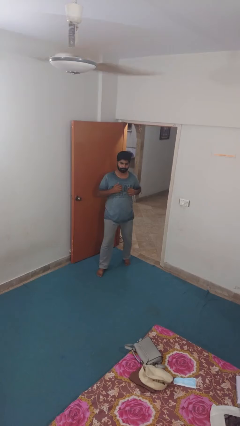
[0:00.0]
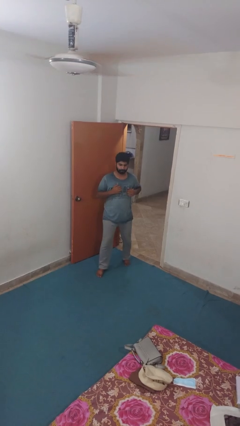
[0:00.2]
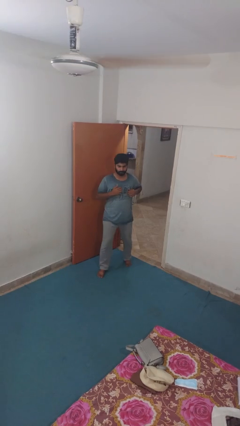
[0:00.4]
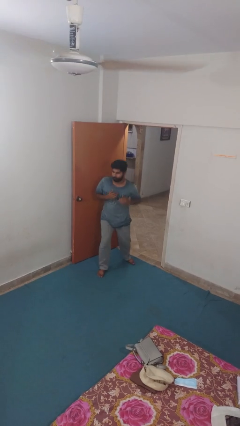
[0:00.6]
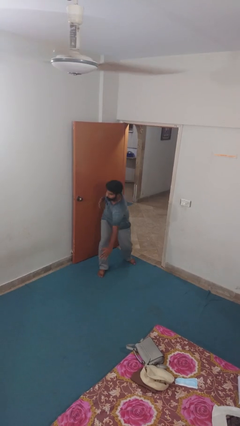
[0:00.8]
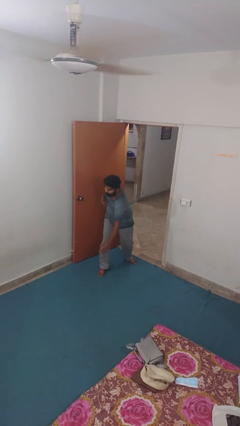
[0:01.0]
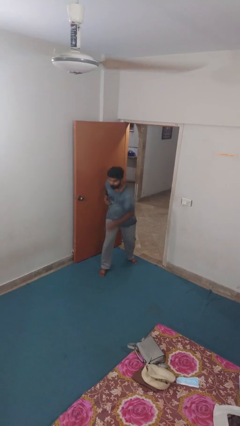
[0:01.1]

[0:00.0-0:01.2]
person karate chop

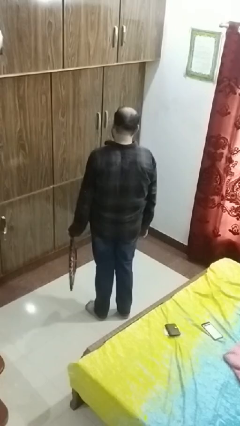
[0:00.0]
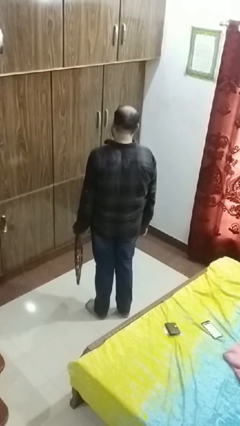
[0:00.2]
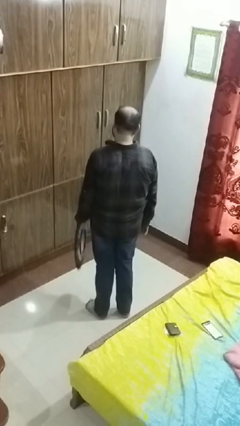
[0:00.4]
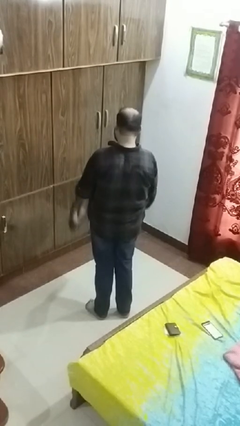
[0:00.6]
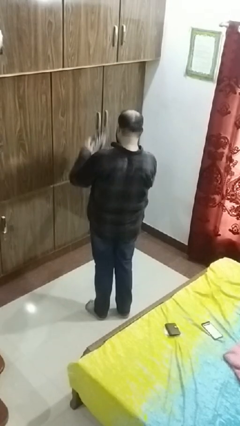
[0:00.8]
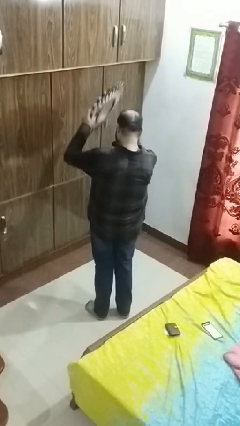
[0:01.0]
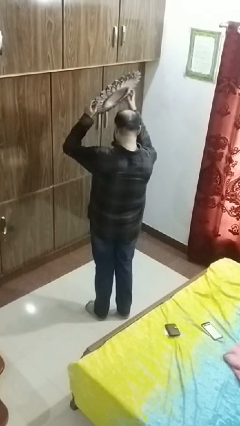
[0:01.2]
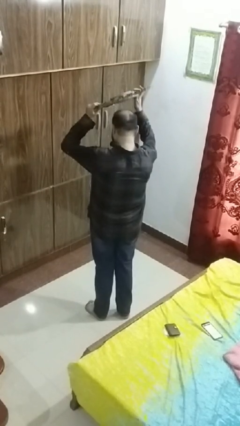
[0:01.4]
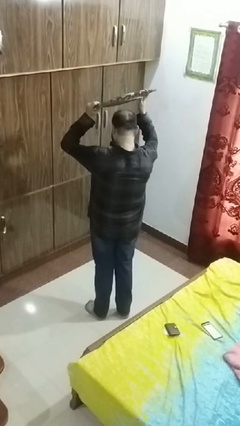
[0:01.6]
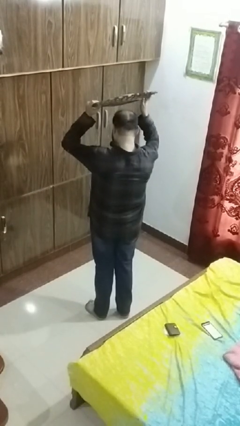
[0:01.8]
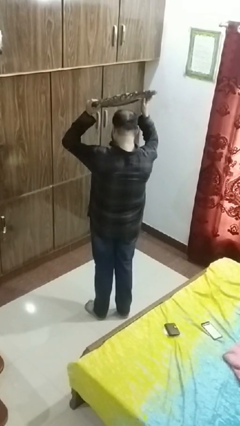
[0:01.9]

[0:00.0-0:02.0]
person holds object above head

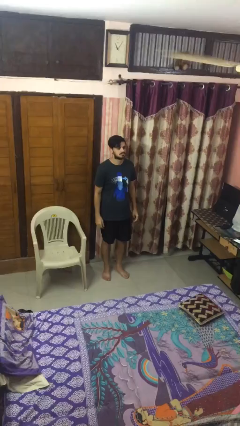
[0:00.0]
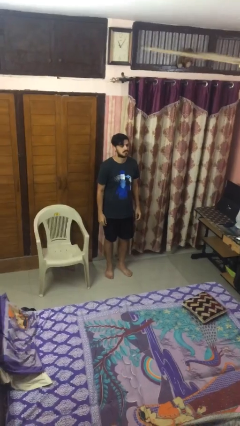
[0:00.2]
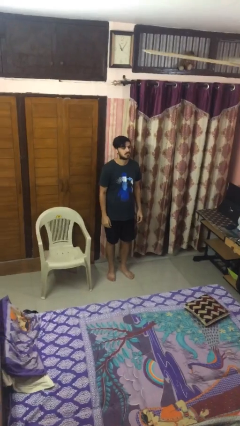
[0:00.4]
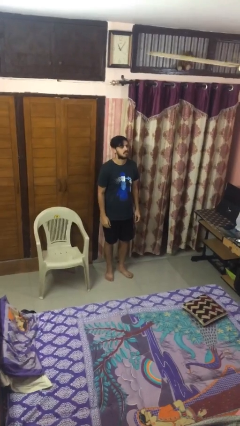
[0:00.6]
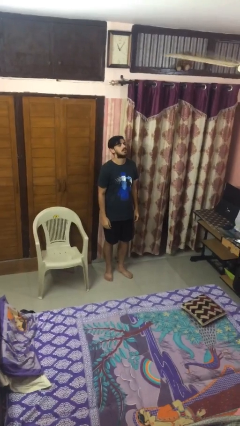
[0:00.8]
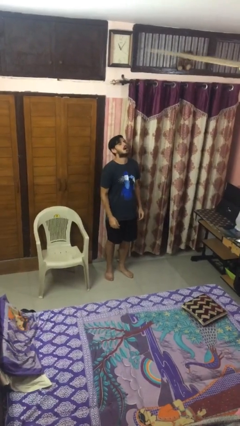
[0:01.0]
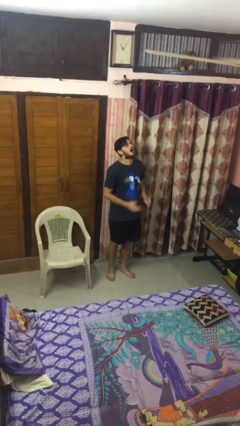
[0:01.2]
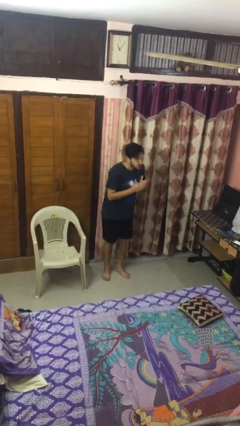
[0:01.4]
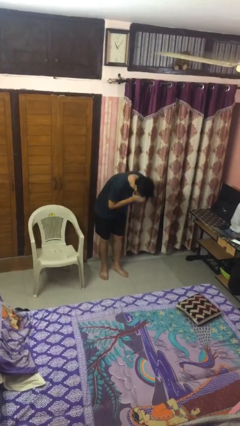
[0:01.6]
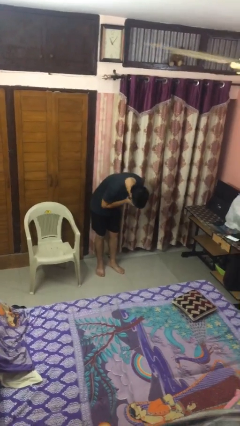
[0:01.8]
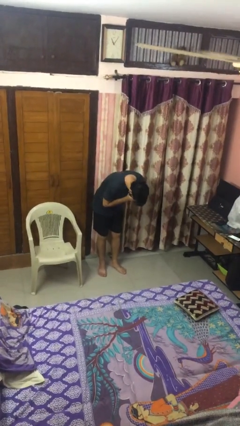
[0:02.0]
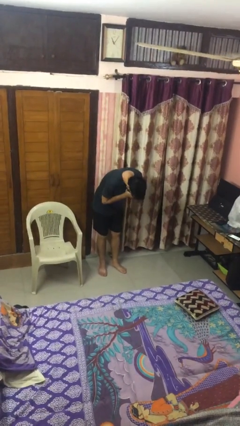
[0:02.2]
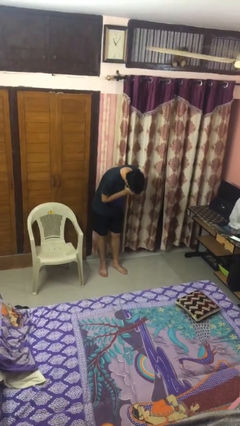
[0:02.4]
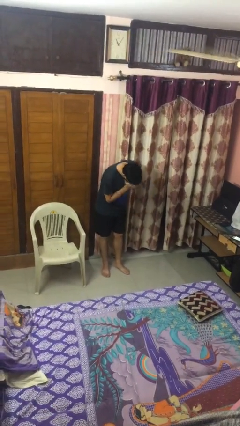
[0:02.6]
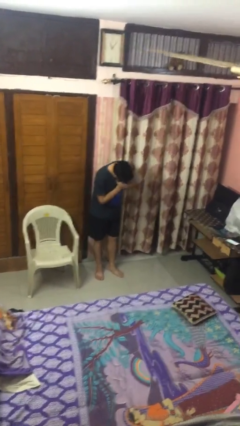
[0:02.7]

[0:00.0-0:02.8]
person sneezes into hand

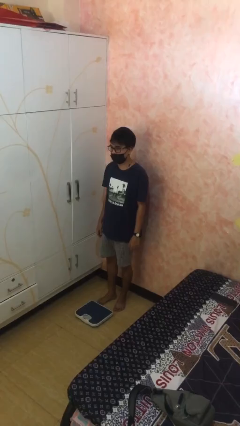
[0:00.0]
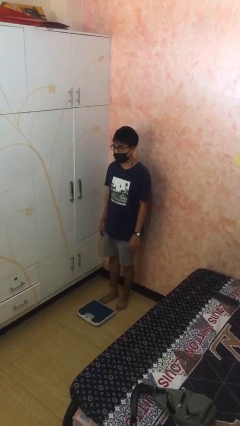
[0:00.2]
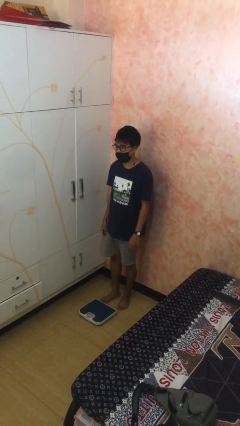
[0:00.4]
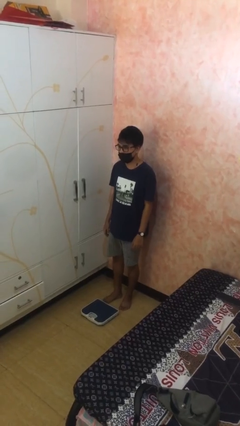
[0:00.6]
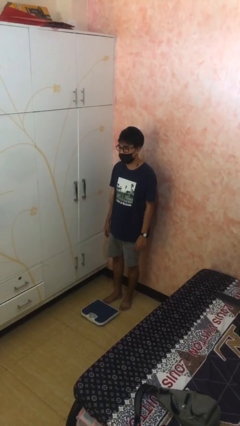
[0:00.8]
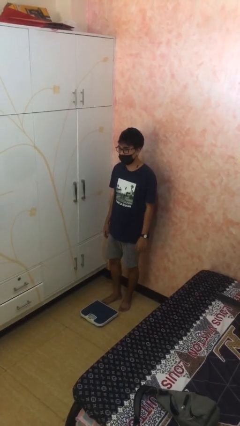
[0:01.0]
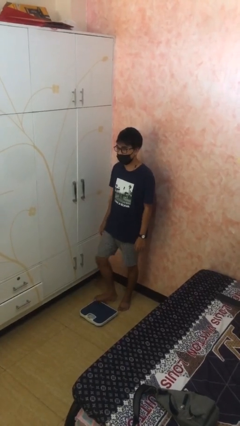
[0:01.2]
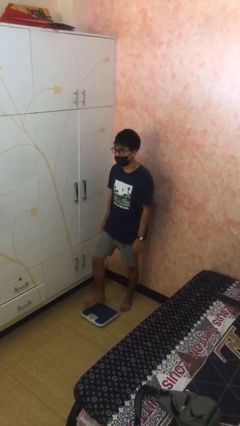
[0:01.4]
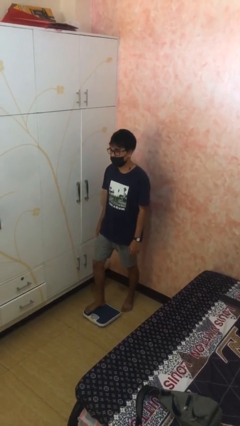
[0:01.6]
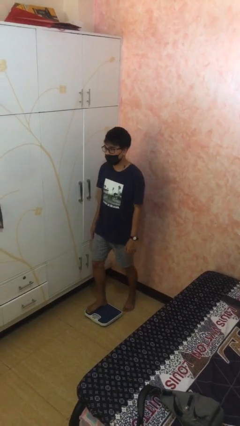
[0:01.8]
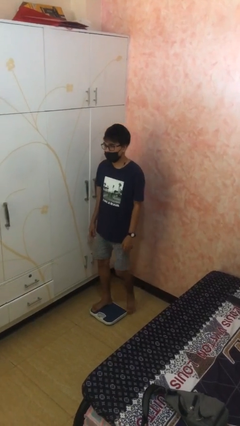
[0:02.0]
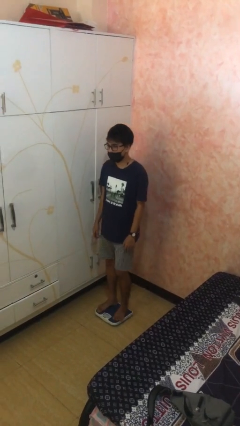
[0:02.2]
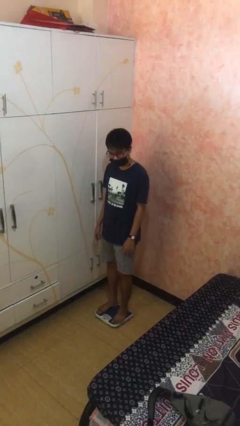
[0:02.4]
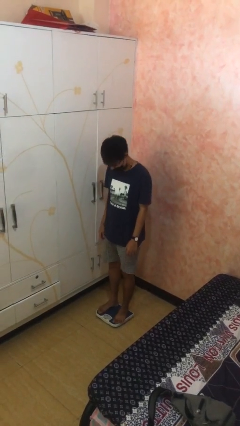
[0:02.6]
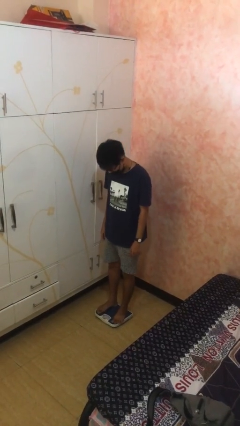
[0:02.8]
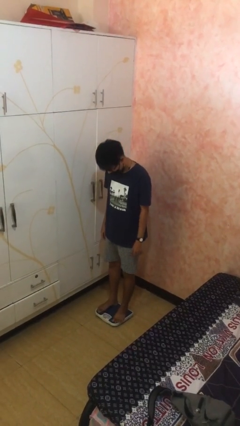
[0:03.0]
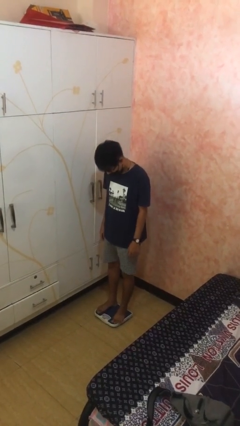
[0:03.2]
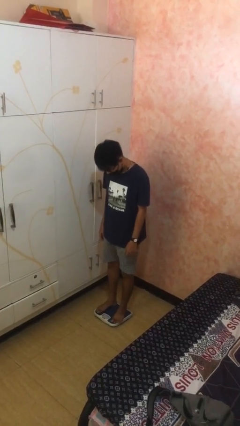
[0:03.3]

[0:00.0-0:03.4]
person uses bodyweight scale

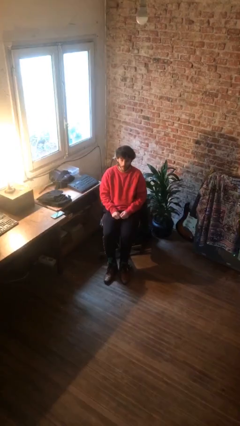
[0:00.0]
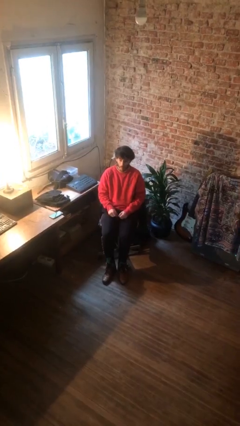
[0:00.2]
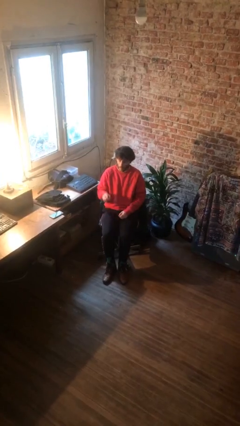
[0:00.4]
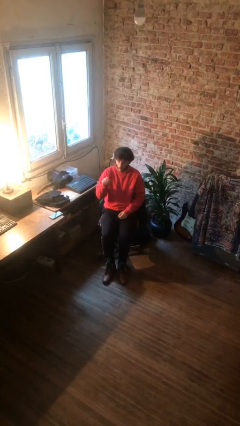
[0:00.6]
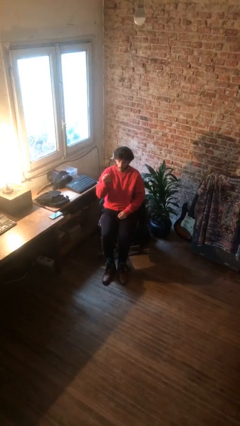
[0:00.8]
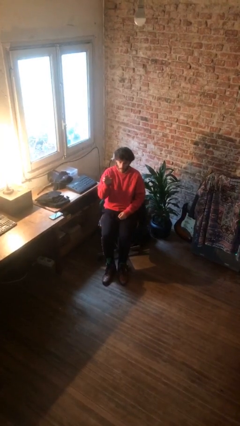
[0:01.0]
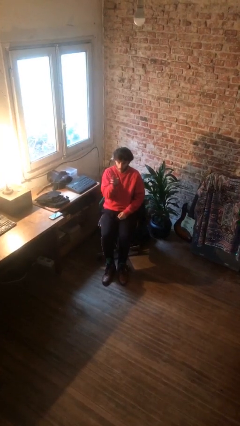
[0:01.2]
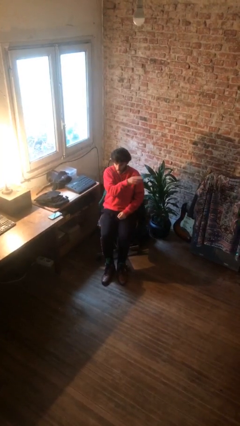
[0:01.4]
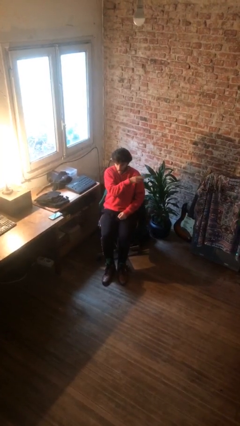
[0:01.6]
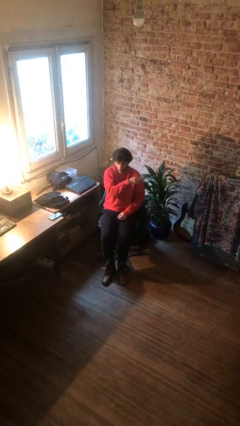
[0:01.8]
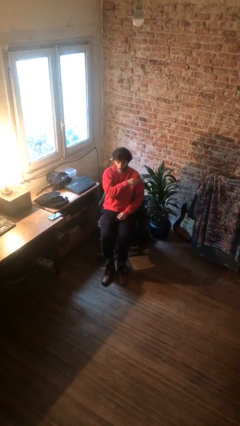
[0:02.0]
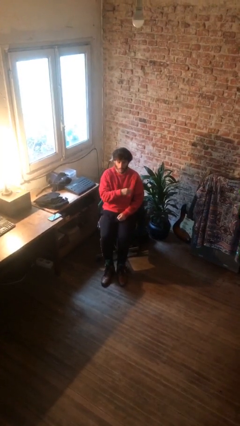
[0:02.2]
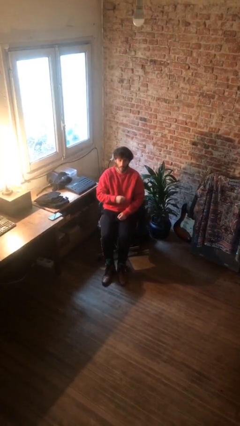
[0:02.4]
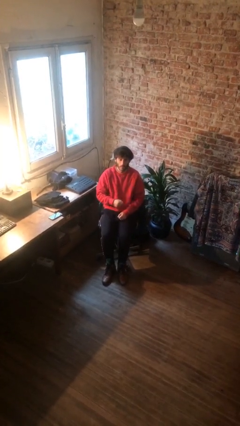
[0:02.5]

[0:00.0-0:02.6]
person gestures swipe left

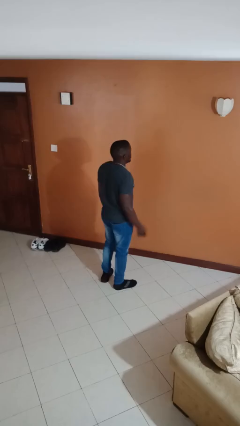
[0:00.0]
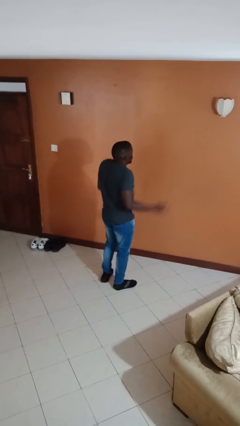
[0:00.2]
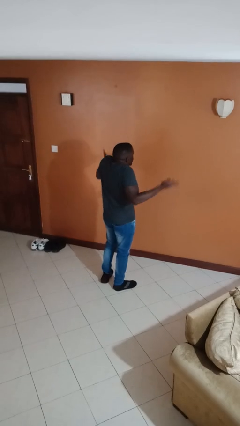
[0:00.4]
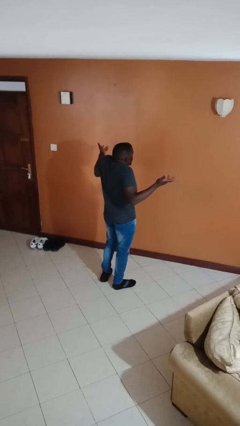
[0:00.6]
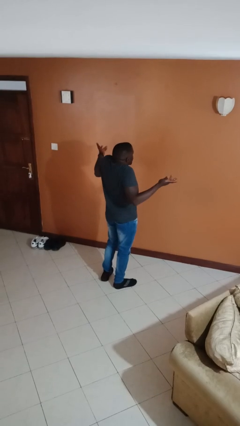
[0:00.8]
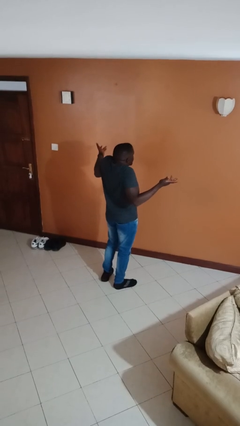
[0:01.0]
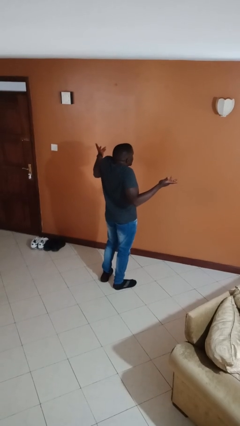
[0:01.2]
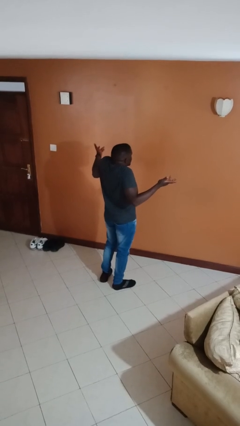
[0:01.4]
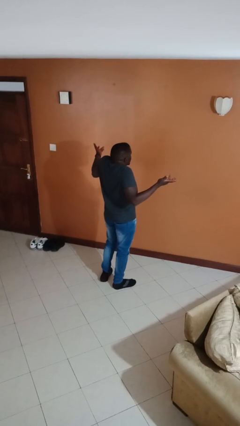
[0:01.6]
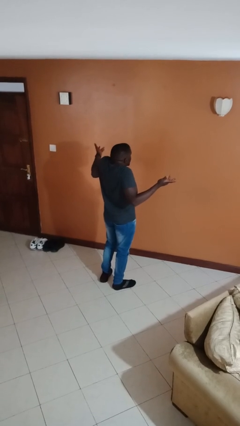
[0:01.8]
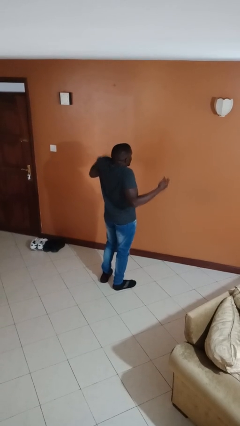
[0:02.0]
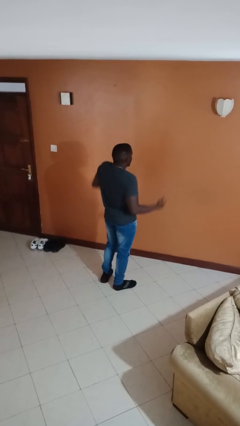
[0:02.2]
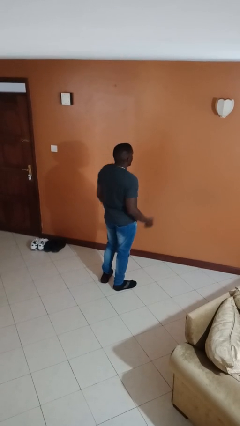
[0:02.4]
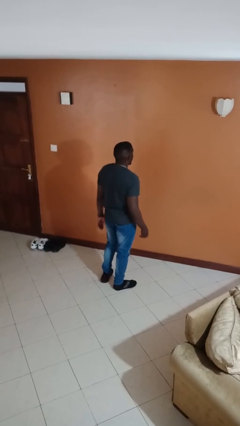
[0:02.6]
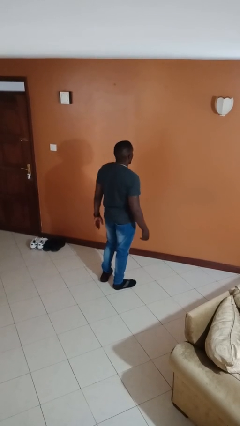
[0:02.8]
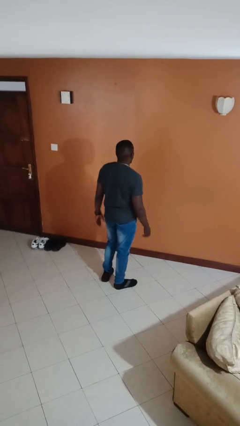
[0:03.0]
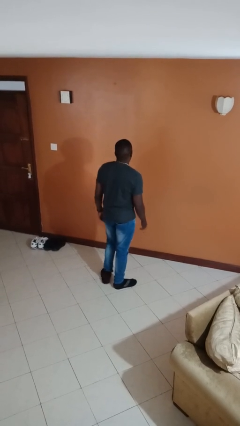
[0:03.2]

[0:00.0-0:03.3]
person shrugs

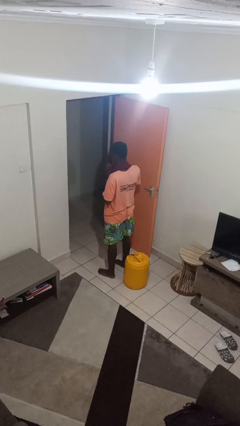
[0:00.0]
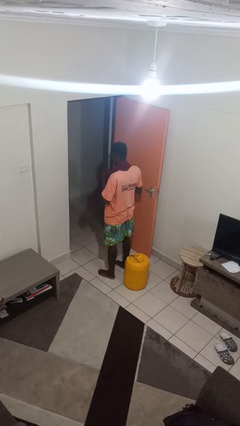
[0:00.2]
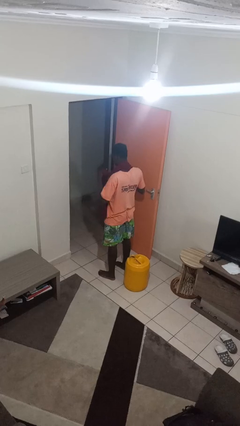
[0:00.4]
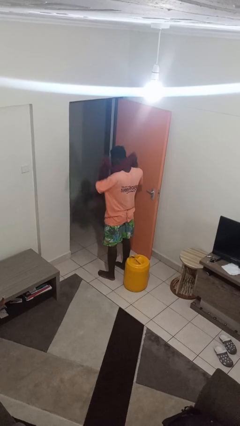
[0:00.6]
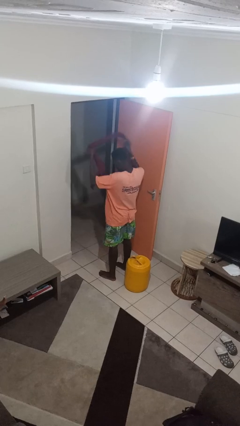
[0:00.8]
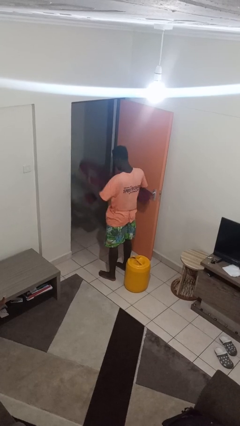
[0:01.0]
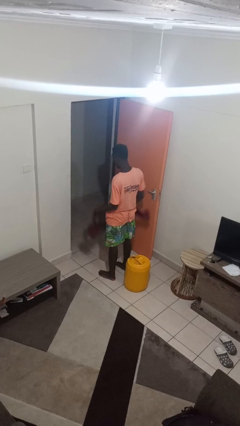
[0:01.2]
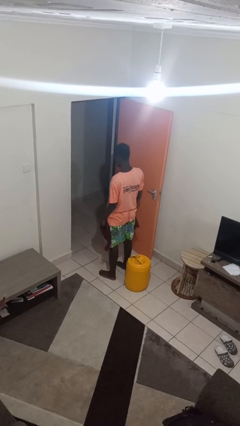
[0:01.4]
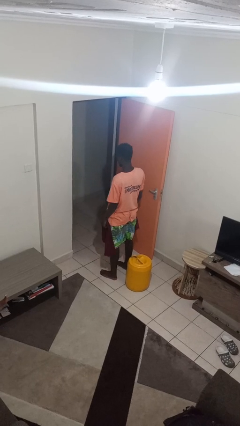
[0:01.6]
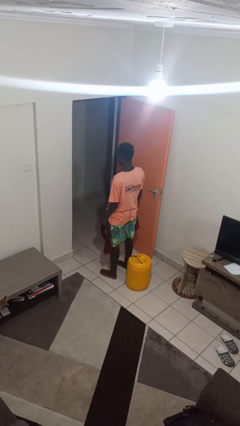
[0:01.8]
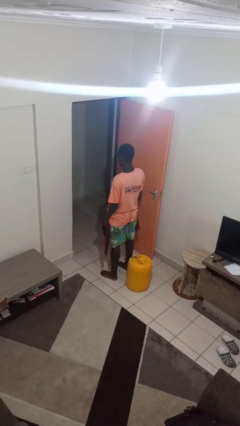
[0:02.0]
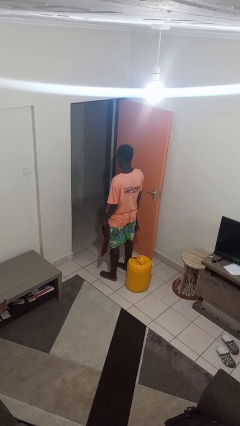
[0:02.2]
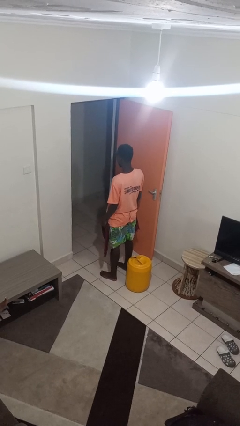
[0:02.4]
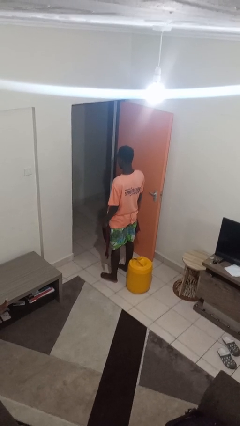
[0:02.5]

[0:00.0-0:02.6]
person takes off scarf
